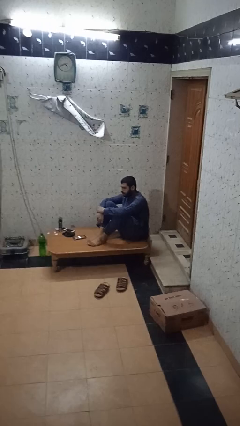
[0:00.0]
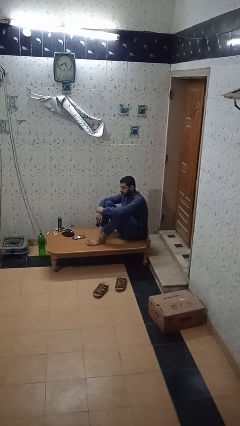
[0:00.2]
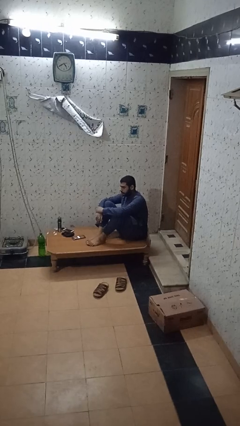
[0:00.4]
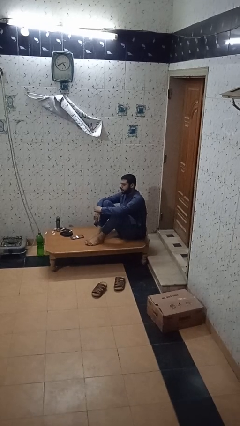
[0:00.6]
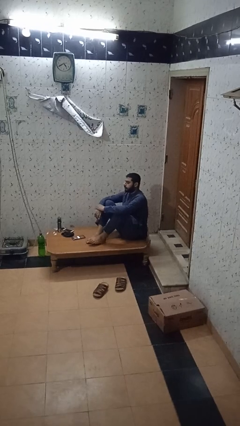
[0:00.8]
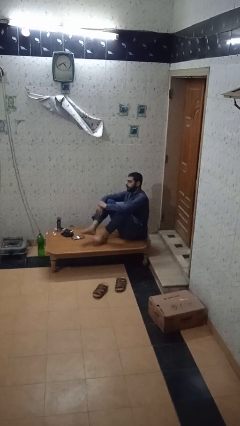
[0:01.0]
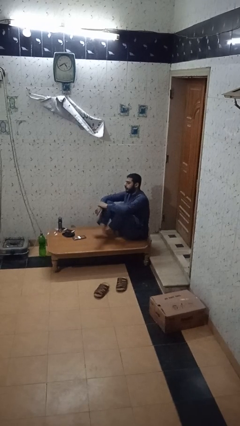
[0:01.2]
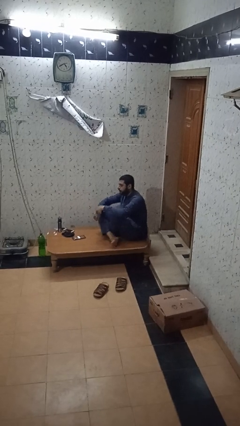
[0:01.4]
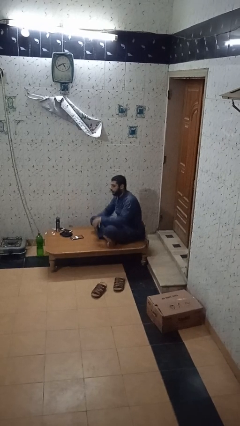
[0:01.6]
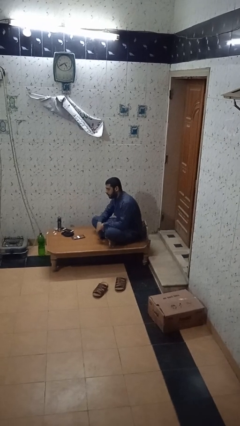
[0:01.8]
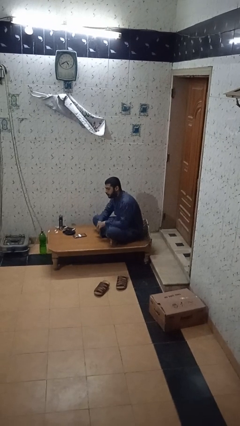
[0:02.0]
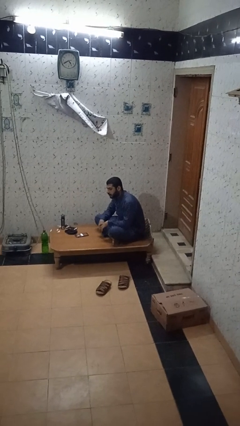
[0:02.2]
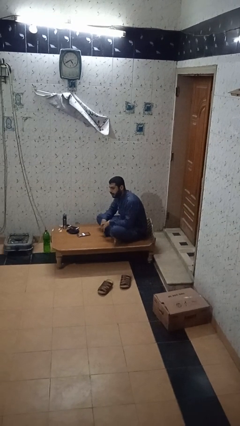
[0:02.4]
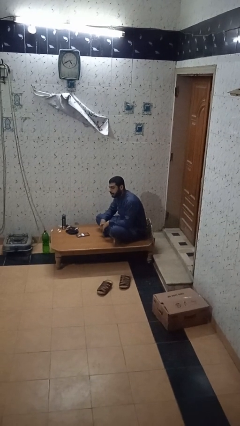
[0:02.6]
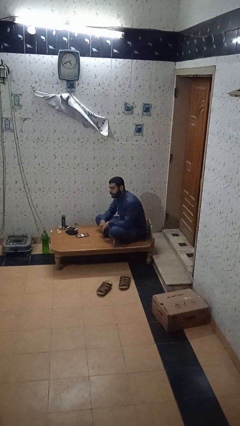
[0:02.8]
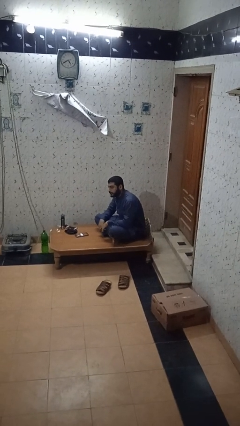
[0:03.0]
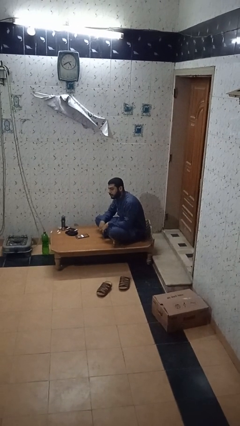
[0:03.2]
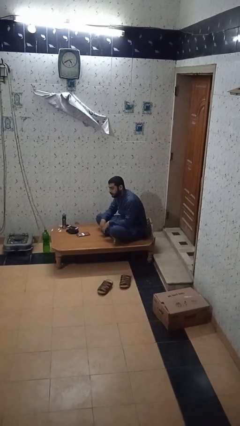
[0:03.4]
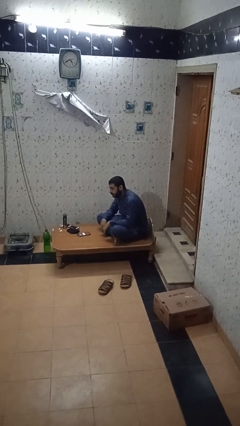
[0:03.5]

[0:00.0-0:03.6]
person crosses legs

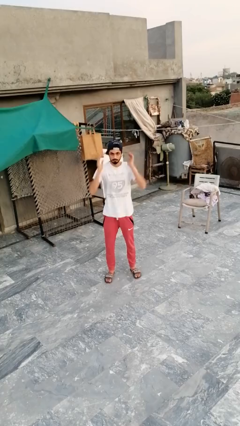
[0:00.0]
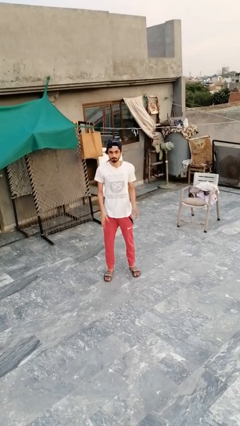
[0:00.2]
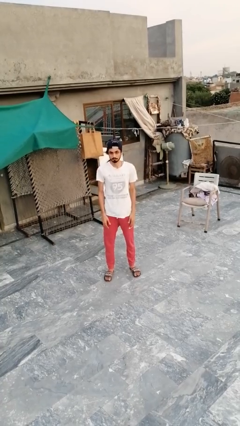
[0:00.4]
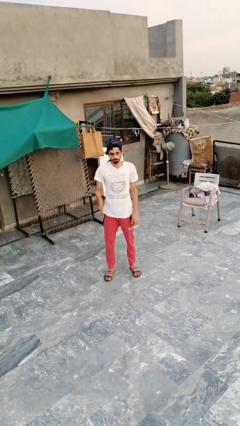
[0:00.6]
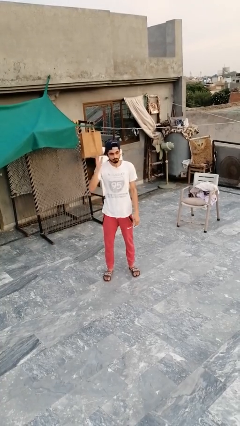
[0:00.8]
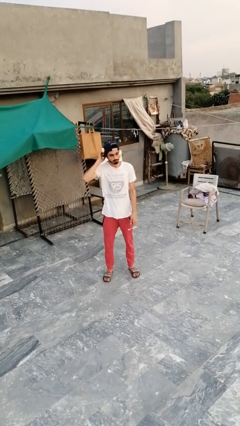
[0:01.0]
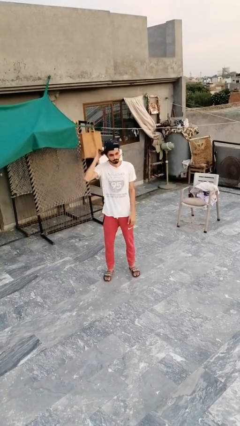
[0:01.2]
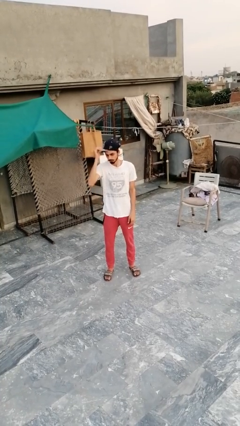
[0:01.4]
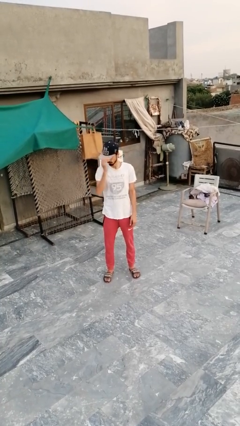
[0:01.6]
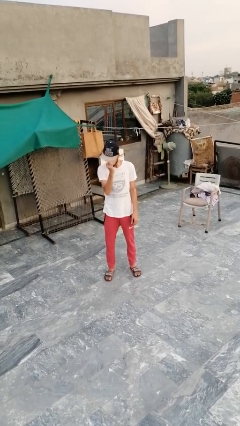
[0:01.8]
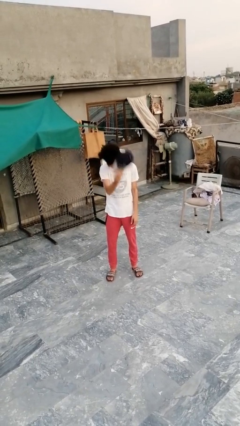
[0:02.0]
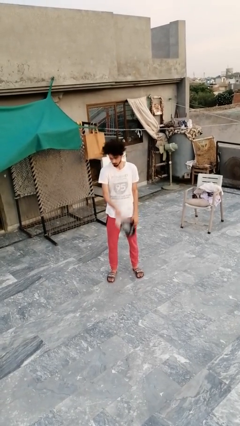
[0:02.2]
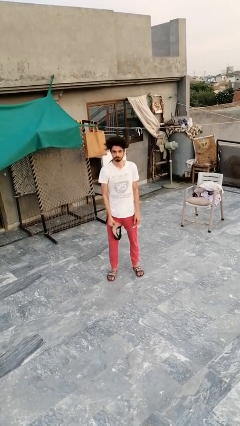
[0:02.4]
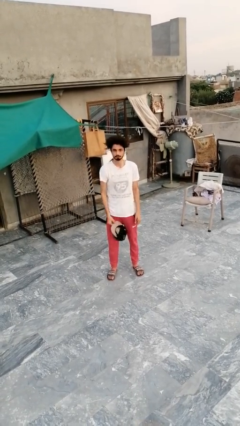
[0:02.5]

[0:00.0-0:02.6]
person takes off hat

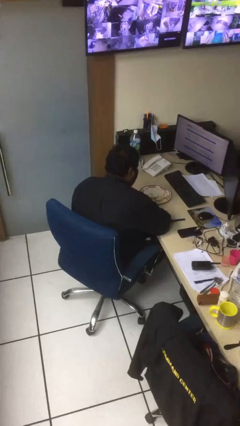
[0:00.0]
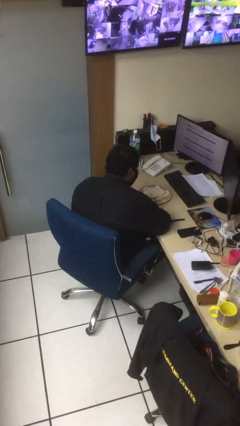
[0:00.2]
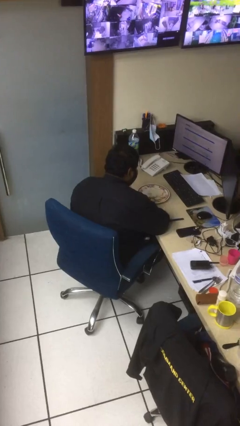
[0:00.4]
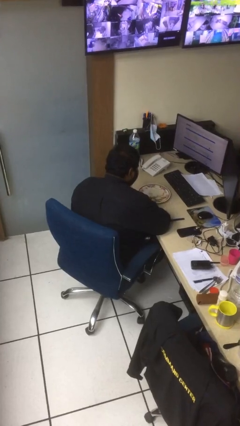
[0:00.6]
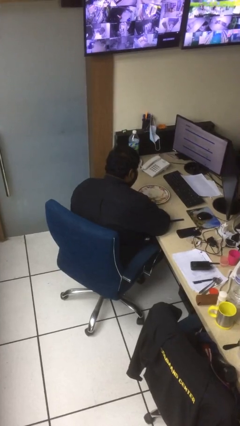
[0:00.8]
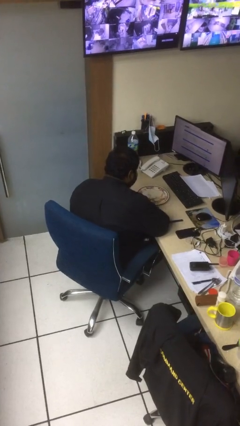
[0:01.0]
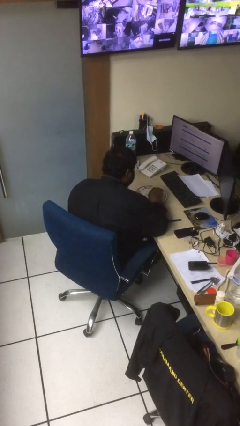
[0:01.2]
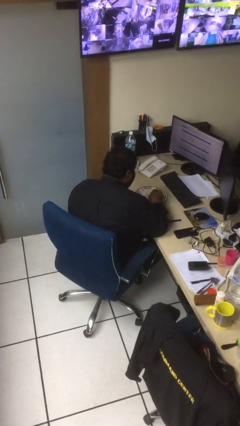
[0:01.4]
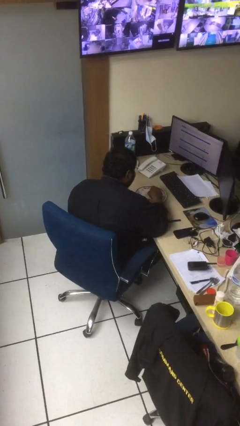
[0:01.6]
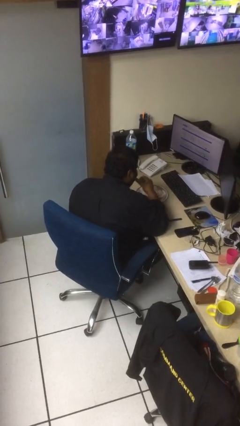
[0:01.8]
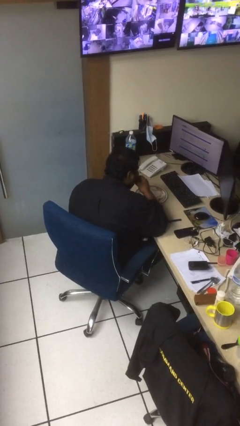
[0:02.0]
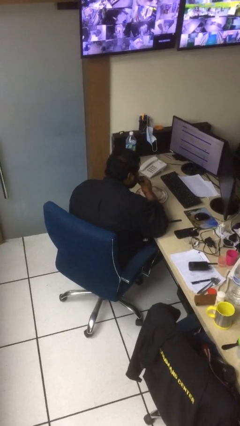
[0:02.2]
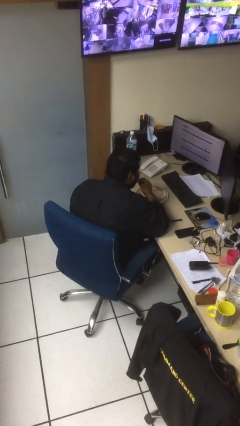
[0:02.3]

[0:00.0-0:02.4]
person eats with hands

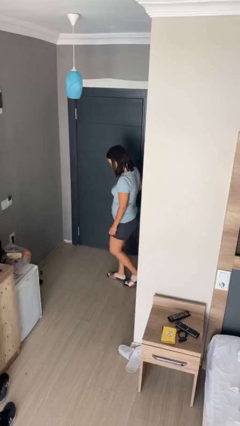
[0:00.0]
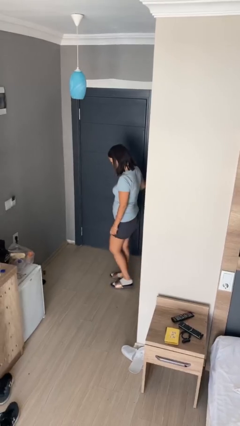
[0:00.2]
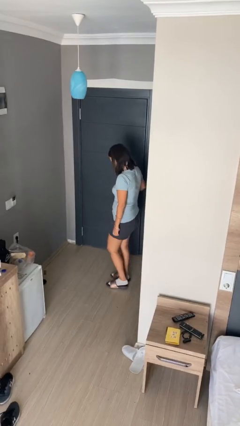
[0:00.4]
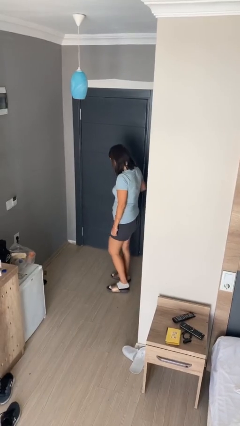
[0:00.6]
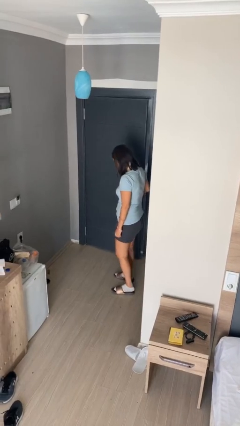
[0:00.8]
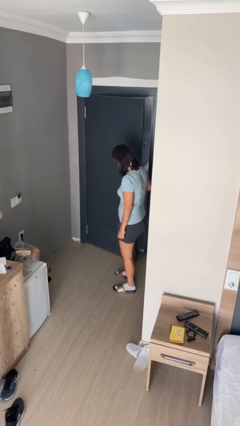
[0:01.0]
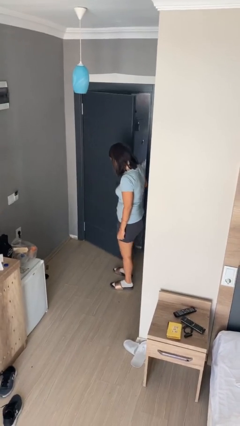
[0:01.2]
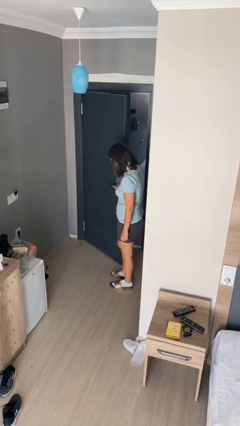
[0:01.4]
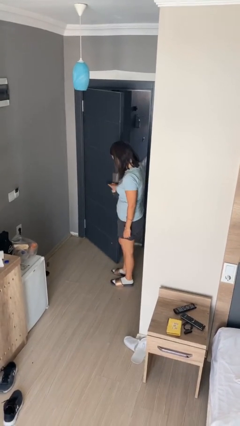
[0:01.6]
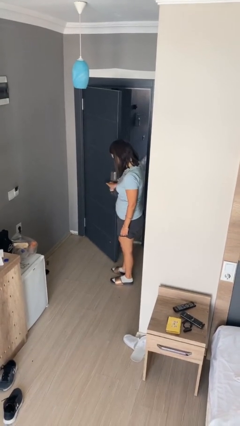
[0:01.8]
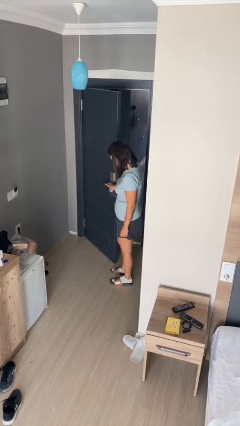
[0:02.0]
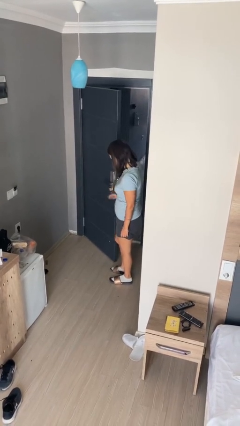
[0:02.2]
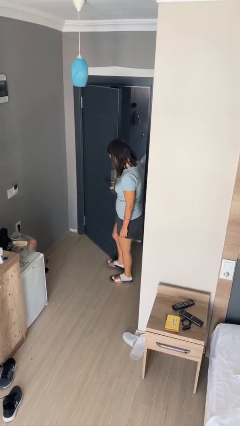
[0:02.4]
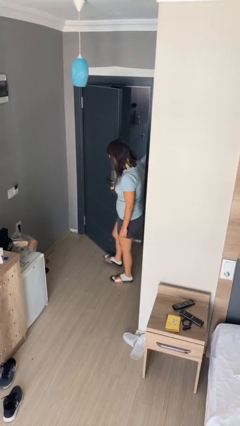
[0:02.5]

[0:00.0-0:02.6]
person opens facility door

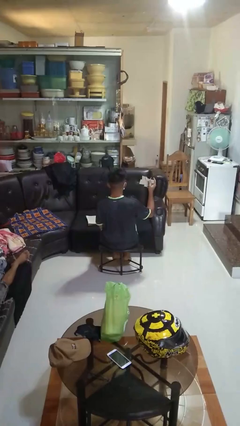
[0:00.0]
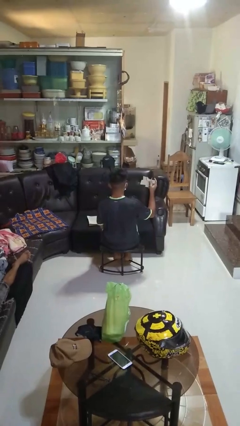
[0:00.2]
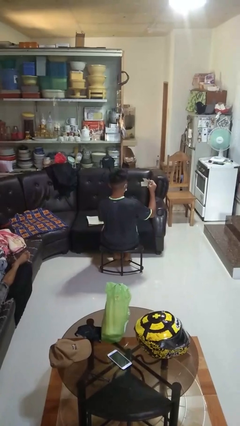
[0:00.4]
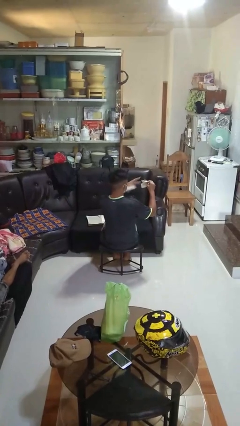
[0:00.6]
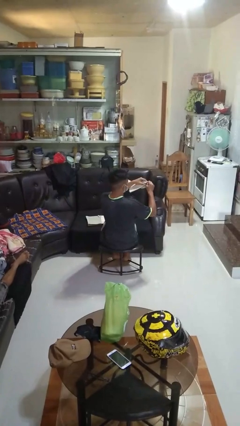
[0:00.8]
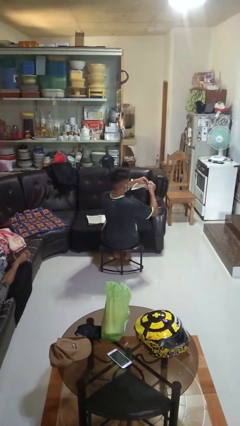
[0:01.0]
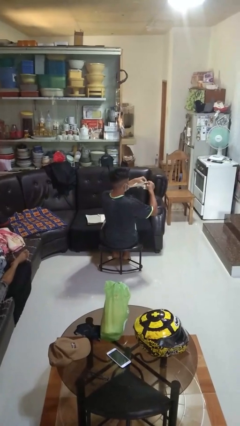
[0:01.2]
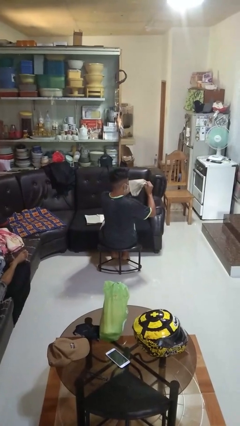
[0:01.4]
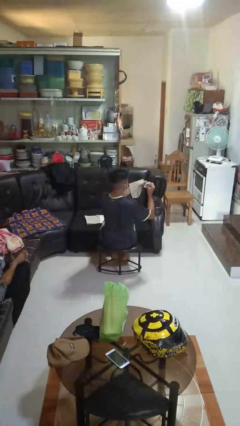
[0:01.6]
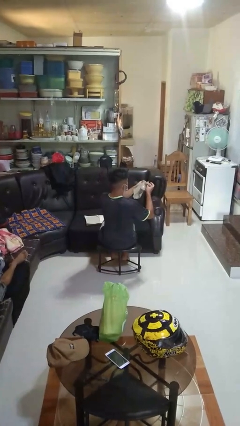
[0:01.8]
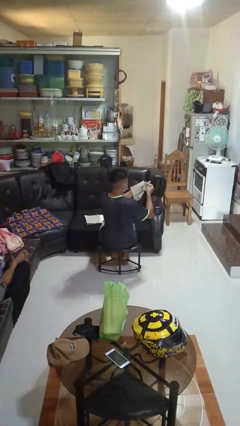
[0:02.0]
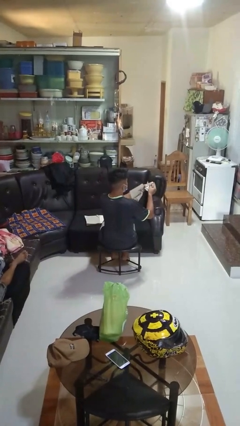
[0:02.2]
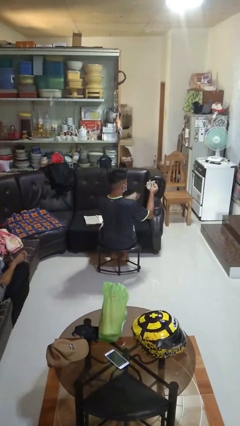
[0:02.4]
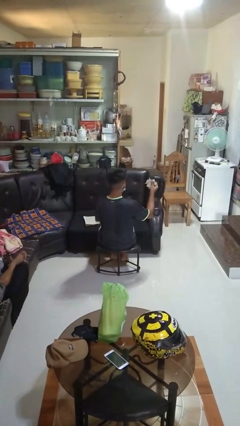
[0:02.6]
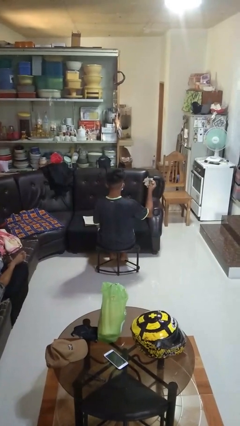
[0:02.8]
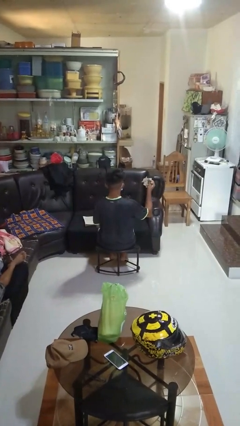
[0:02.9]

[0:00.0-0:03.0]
person tears paper

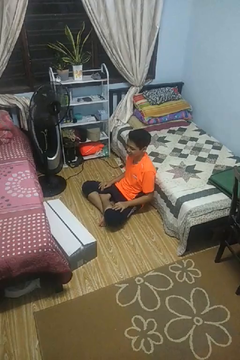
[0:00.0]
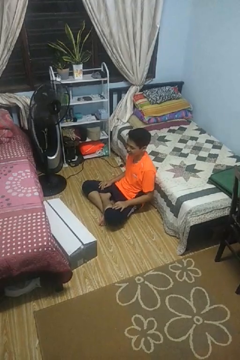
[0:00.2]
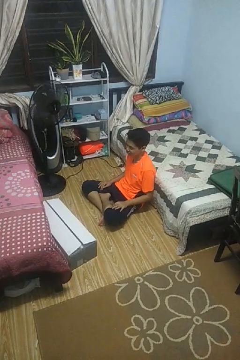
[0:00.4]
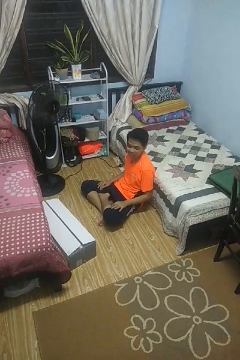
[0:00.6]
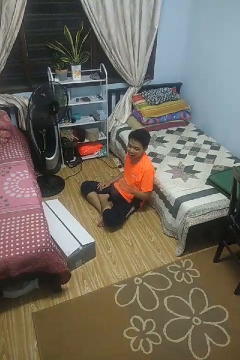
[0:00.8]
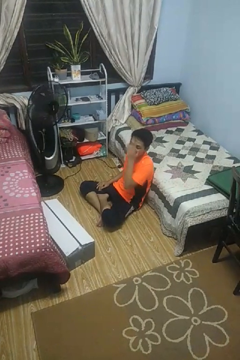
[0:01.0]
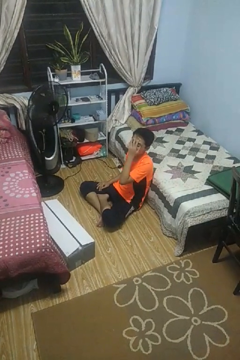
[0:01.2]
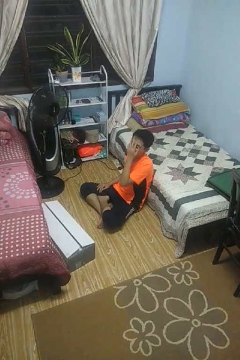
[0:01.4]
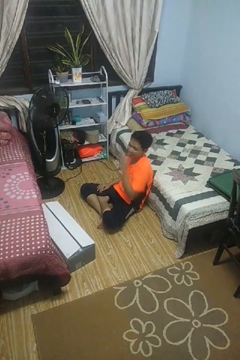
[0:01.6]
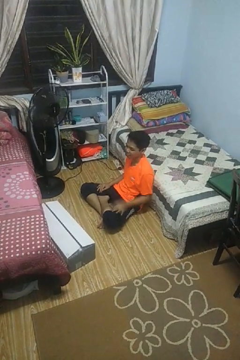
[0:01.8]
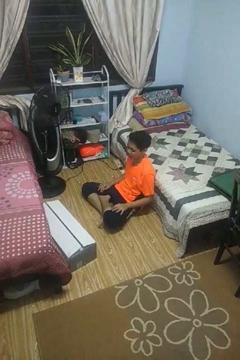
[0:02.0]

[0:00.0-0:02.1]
person covers face with hands

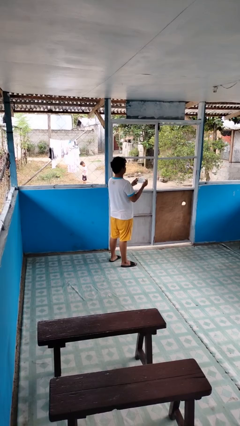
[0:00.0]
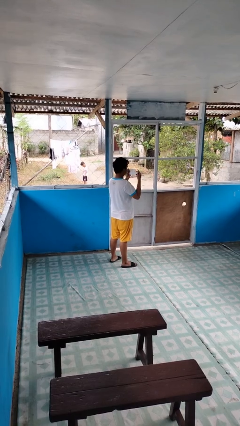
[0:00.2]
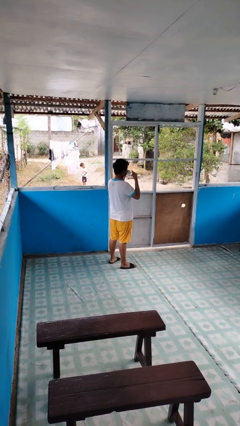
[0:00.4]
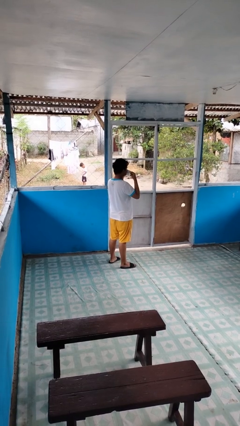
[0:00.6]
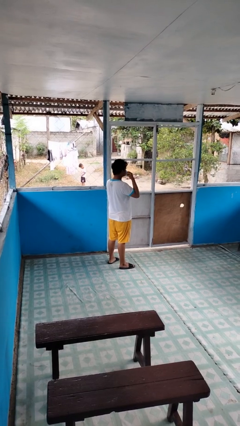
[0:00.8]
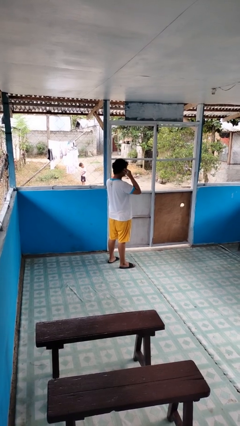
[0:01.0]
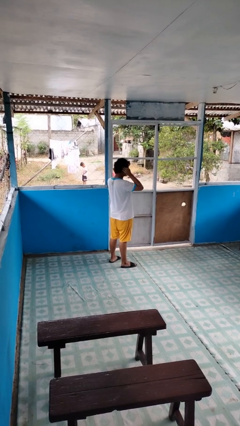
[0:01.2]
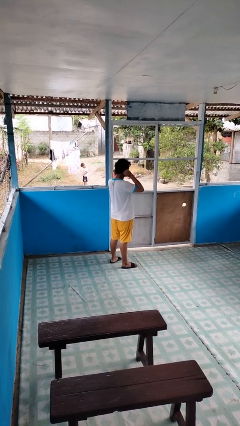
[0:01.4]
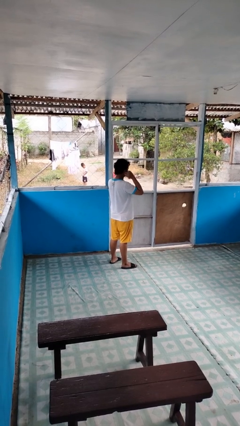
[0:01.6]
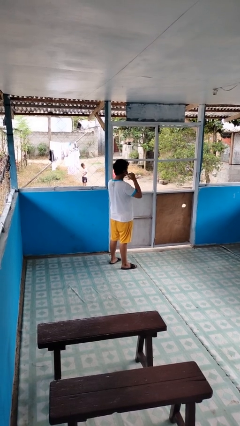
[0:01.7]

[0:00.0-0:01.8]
person puts on facemask
